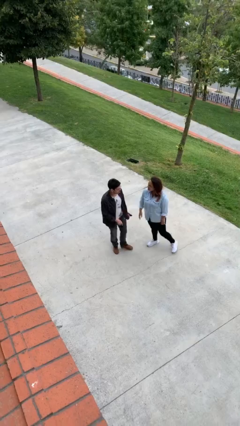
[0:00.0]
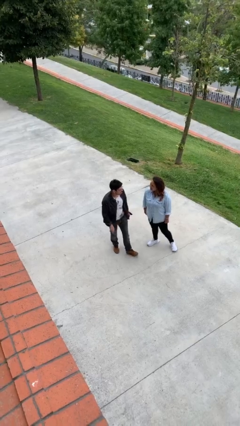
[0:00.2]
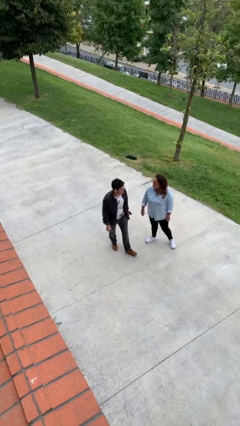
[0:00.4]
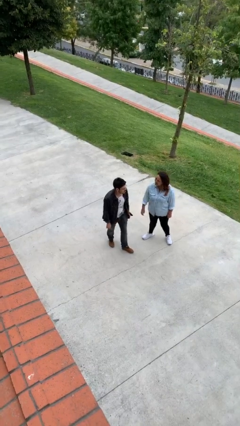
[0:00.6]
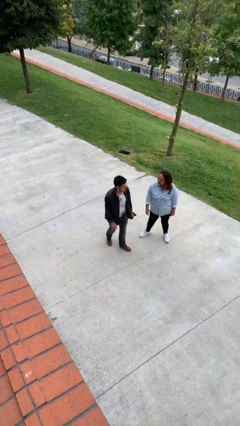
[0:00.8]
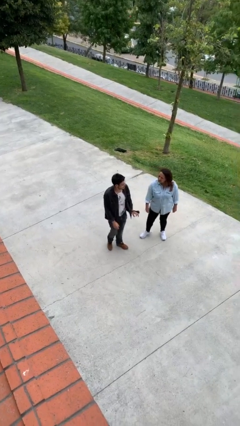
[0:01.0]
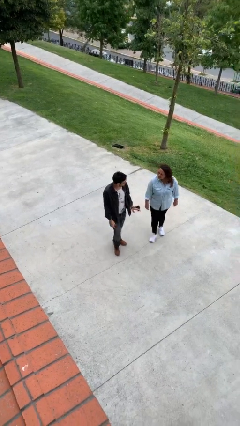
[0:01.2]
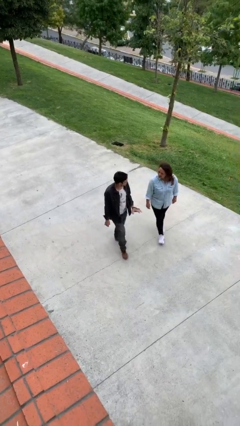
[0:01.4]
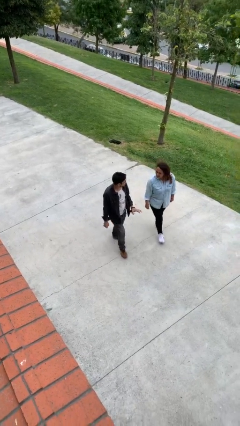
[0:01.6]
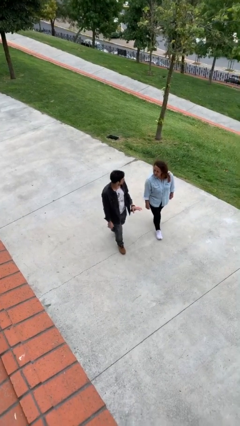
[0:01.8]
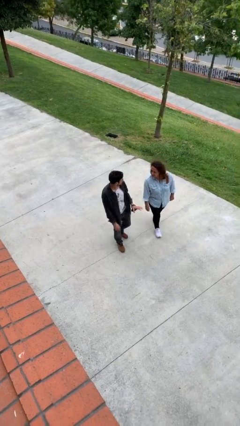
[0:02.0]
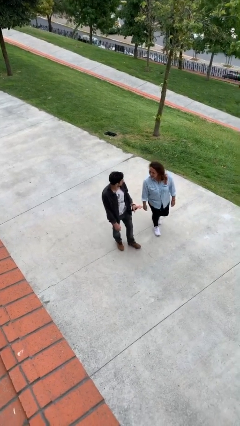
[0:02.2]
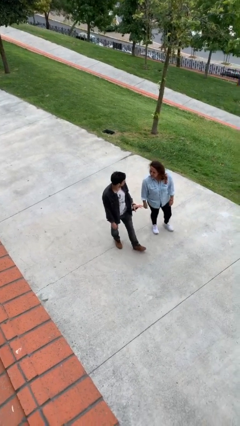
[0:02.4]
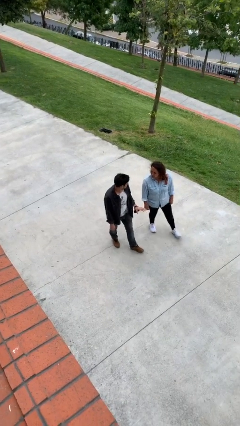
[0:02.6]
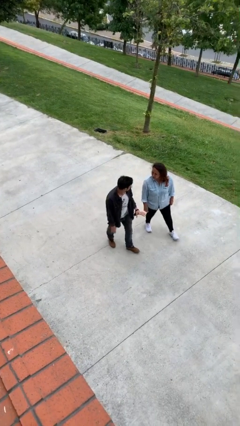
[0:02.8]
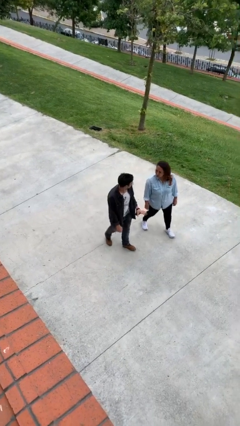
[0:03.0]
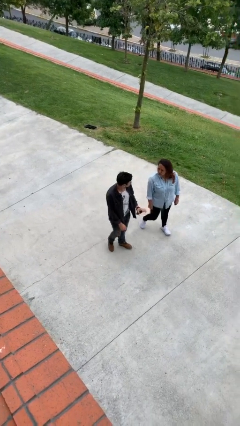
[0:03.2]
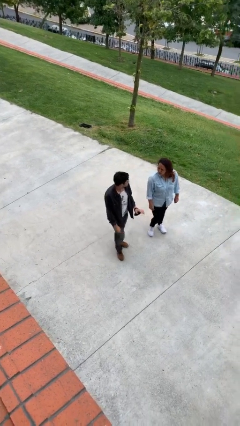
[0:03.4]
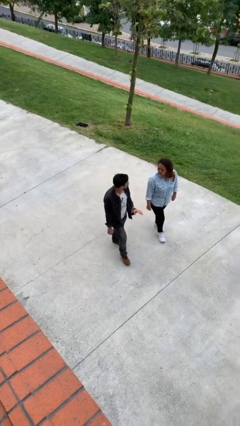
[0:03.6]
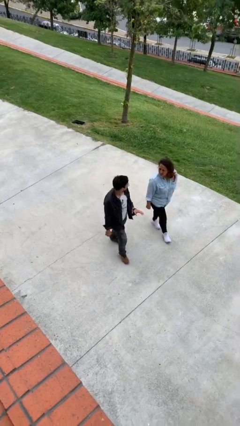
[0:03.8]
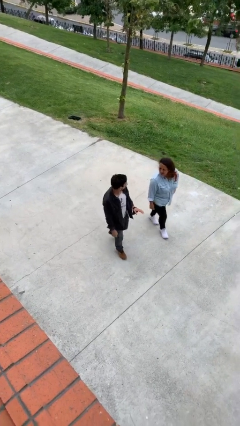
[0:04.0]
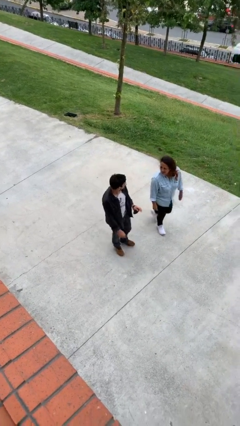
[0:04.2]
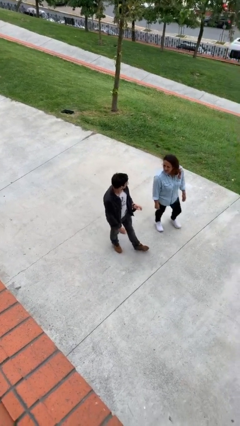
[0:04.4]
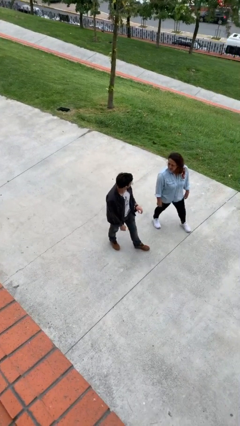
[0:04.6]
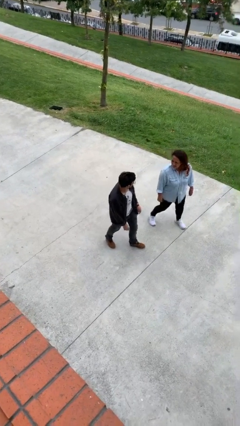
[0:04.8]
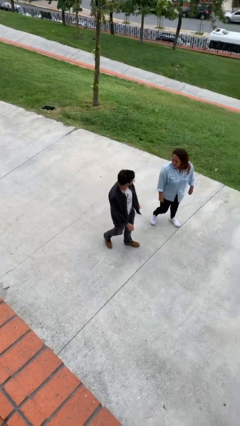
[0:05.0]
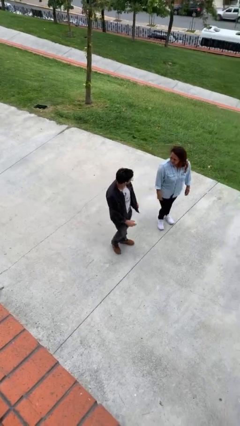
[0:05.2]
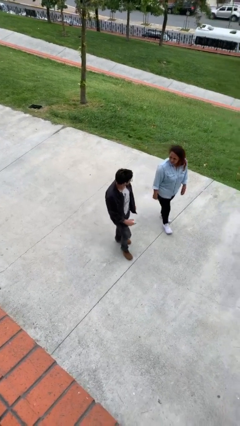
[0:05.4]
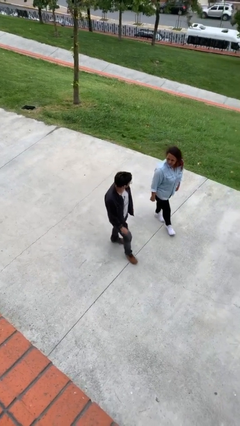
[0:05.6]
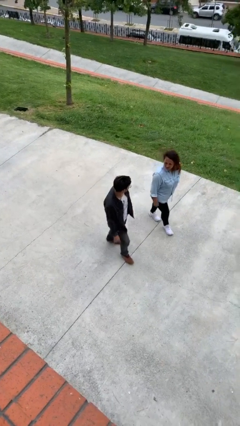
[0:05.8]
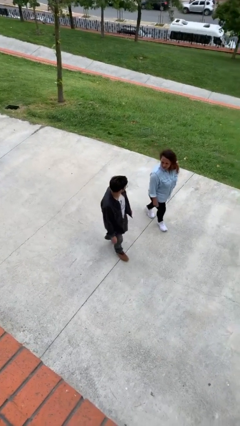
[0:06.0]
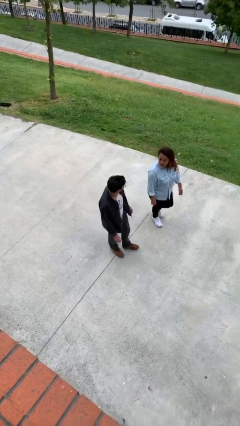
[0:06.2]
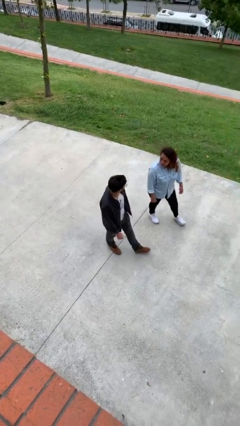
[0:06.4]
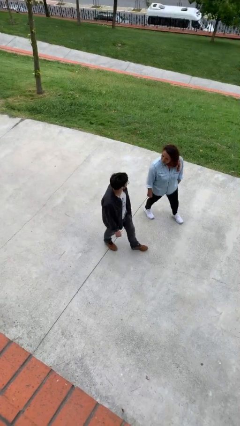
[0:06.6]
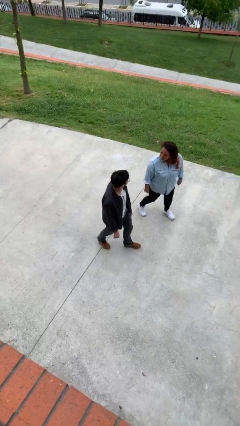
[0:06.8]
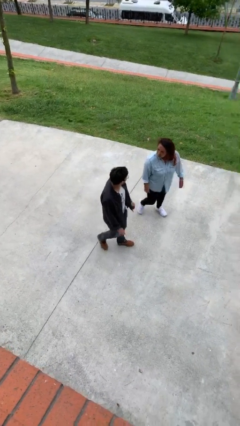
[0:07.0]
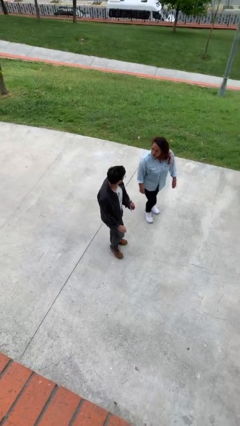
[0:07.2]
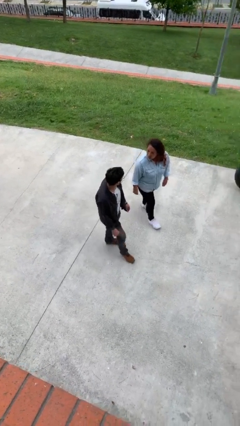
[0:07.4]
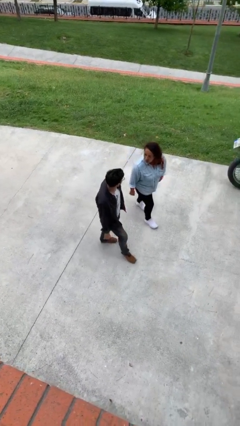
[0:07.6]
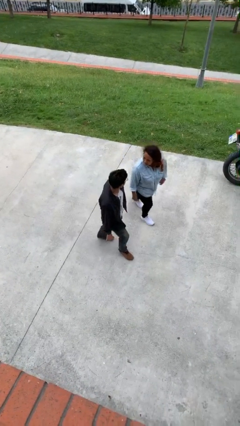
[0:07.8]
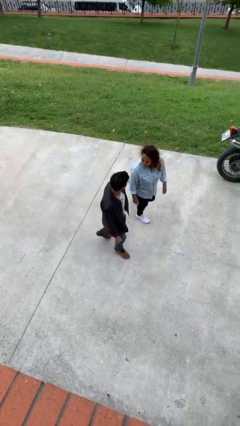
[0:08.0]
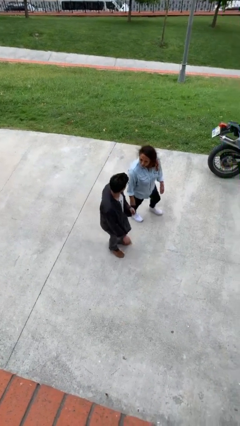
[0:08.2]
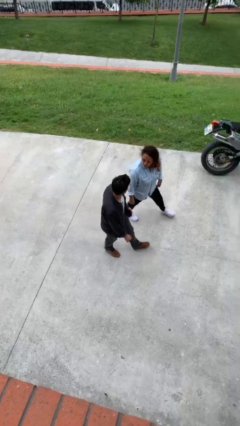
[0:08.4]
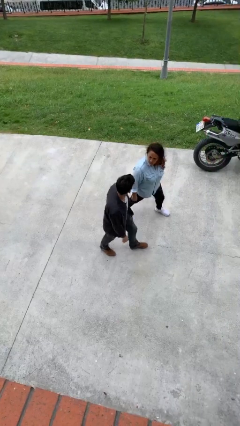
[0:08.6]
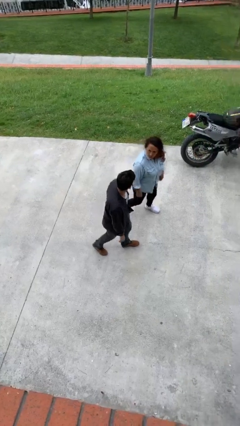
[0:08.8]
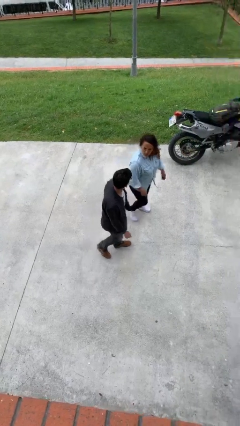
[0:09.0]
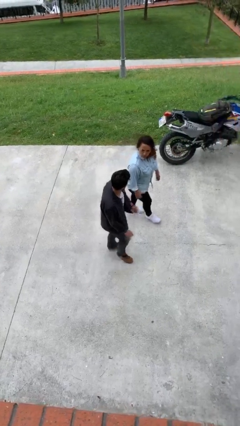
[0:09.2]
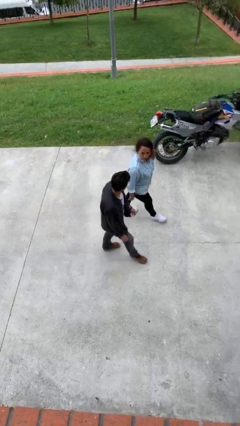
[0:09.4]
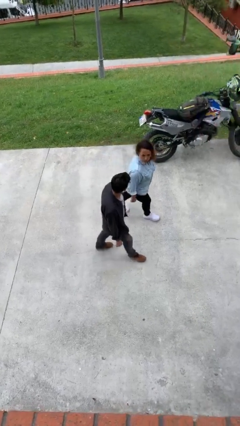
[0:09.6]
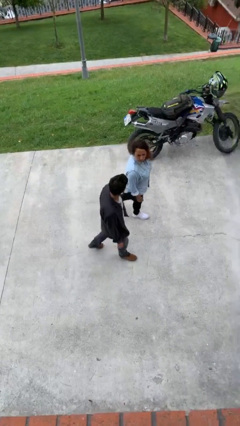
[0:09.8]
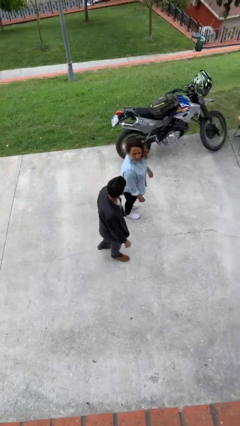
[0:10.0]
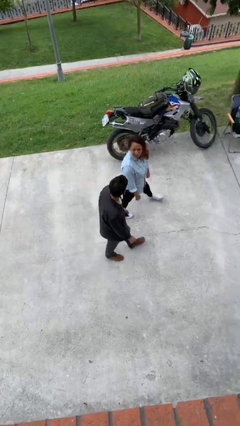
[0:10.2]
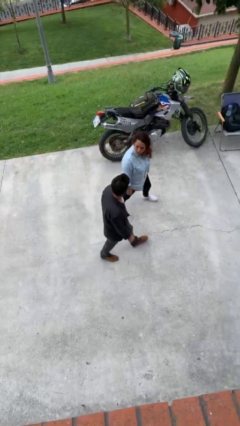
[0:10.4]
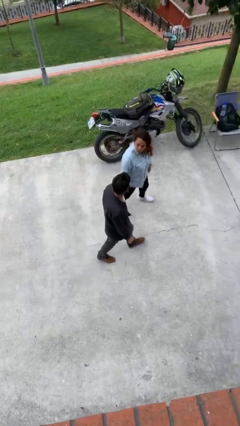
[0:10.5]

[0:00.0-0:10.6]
person talks to person

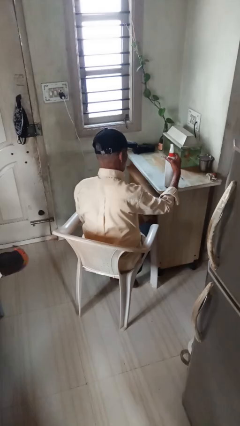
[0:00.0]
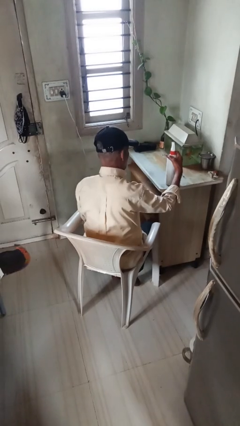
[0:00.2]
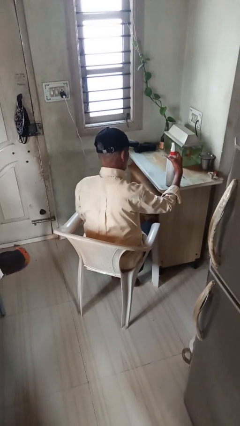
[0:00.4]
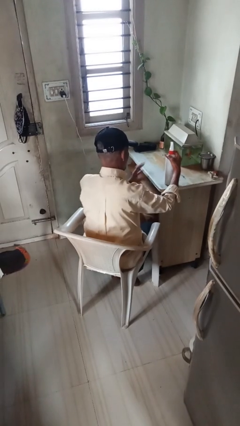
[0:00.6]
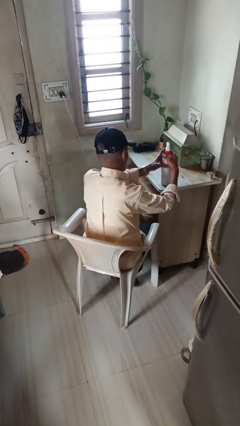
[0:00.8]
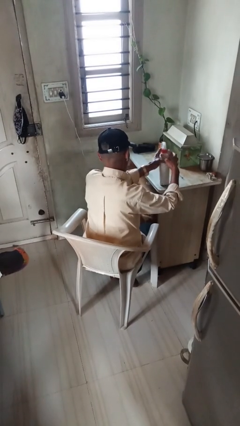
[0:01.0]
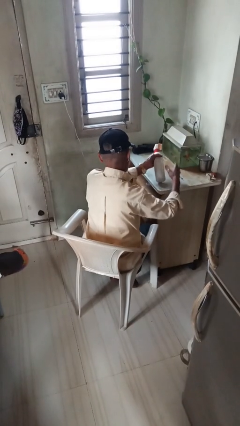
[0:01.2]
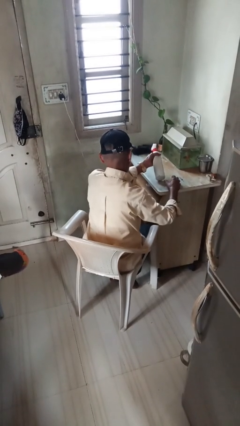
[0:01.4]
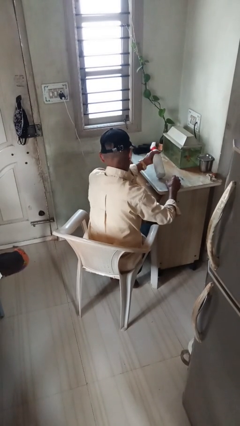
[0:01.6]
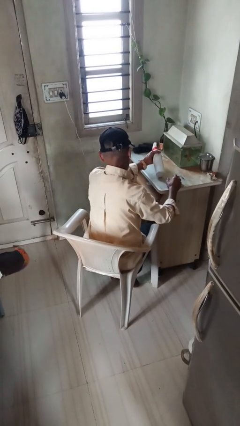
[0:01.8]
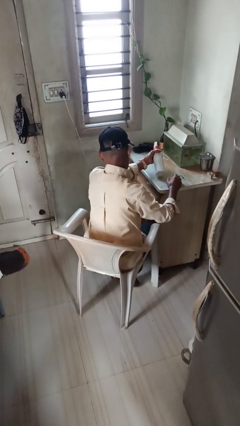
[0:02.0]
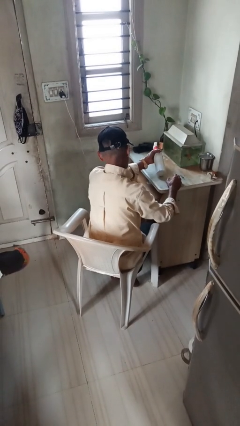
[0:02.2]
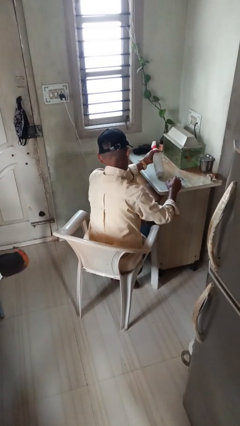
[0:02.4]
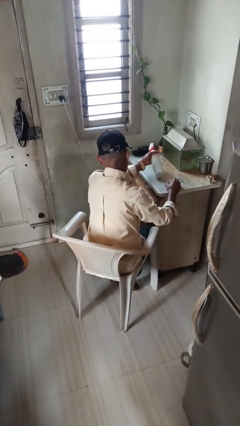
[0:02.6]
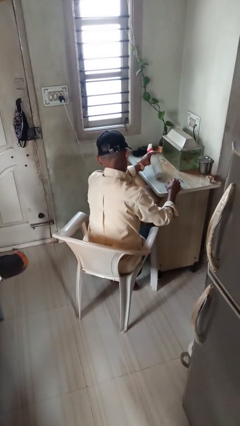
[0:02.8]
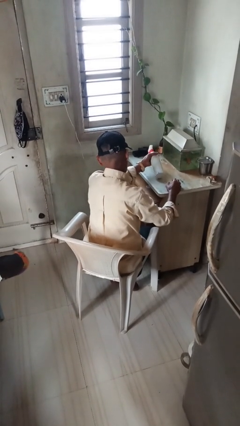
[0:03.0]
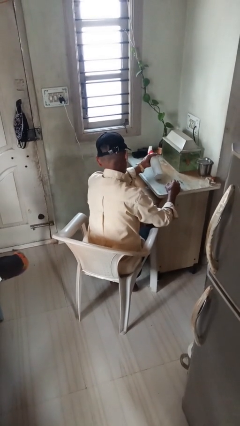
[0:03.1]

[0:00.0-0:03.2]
person sprays from bottle

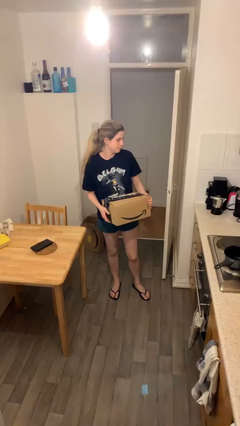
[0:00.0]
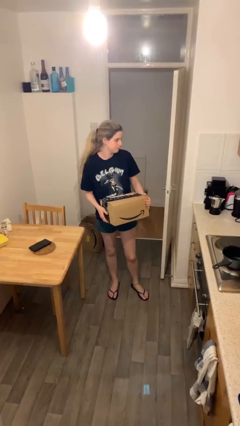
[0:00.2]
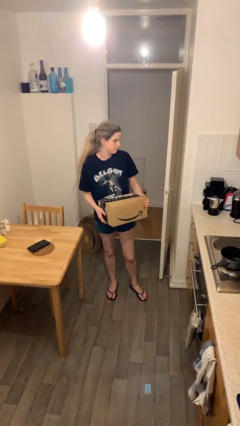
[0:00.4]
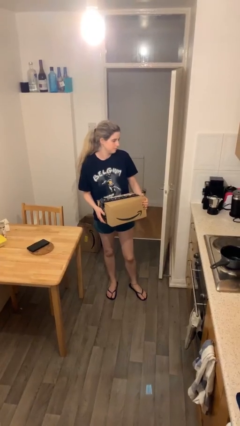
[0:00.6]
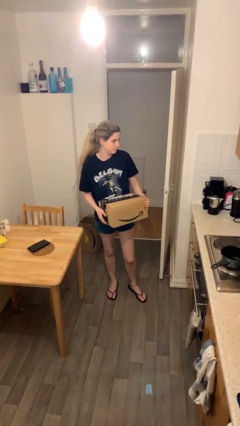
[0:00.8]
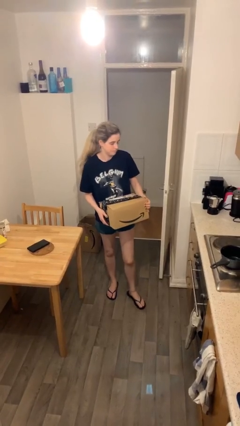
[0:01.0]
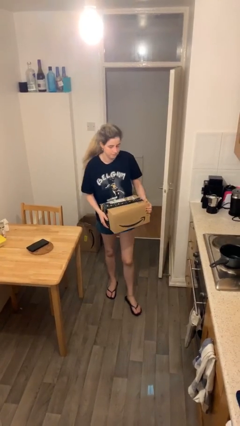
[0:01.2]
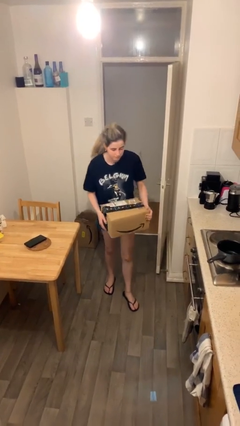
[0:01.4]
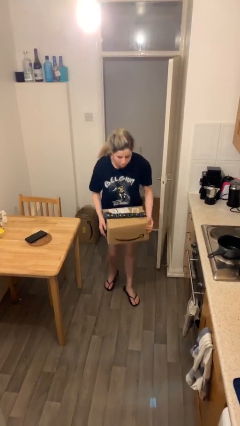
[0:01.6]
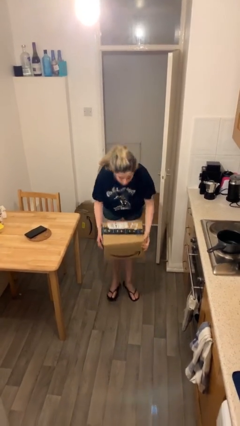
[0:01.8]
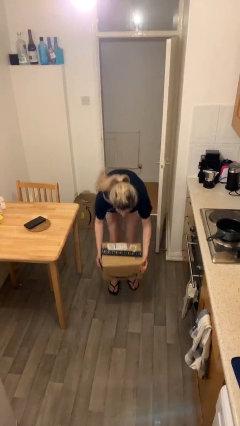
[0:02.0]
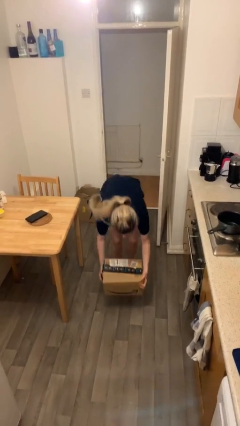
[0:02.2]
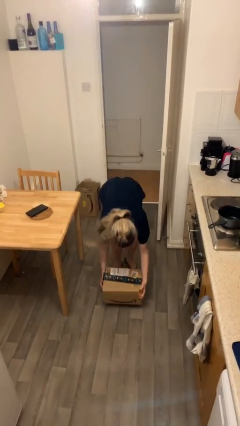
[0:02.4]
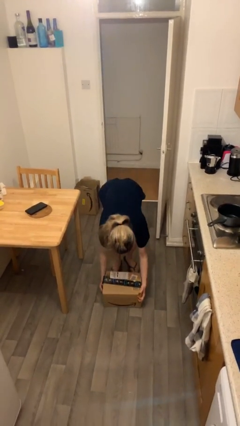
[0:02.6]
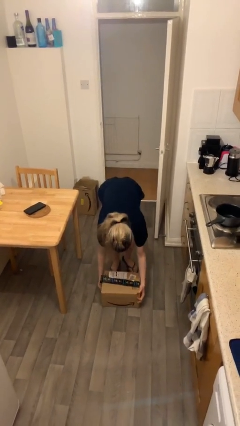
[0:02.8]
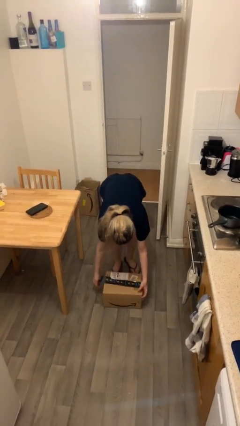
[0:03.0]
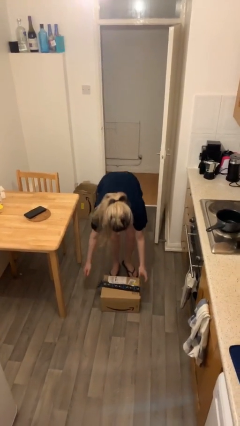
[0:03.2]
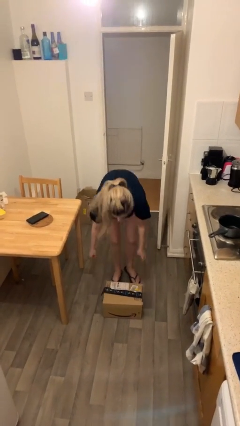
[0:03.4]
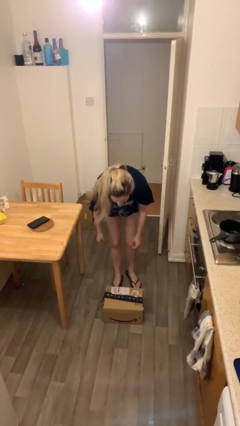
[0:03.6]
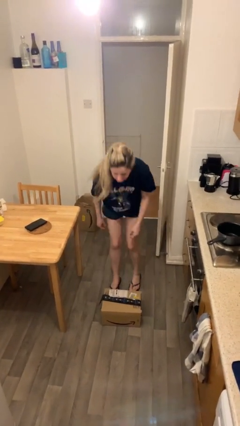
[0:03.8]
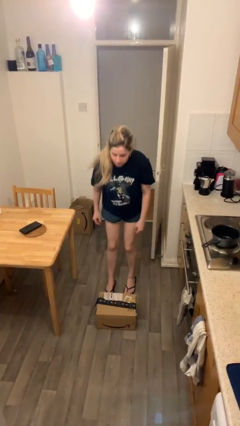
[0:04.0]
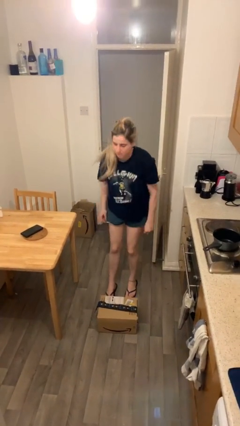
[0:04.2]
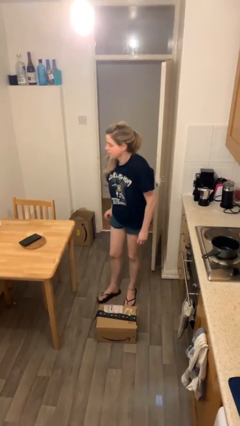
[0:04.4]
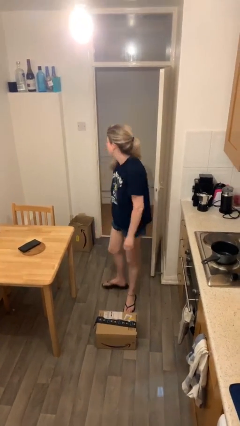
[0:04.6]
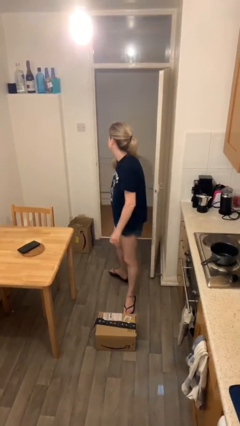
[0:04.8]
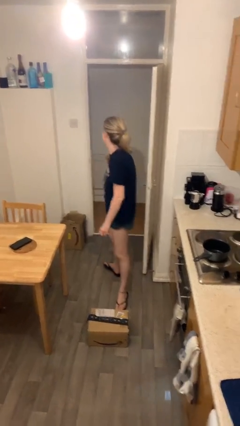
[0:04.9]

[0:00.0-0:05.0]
person puts down object on floor
